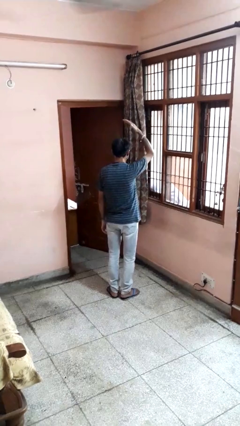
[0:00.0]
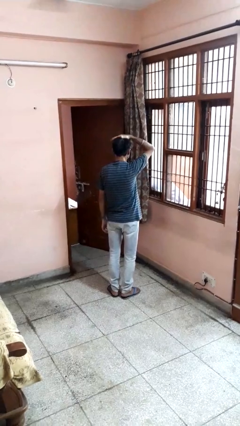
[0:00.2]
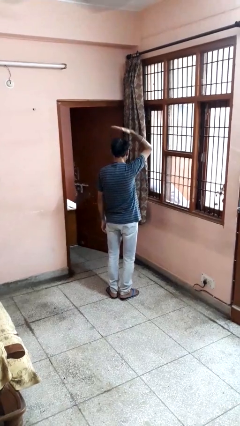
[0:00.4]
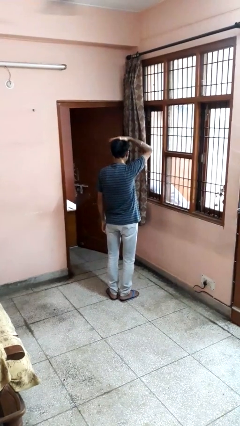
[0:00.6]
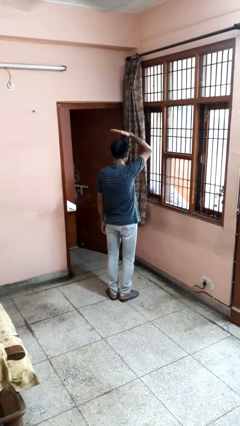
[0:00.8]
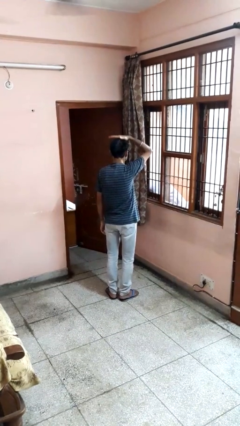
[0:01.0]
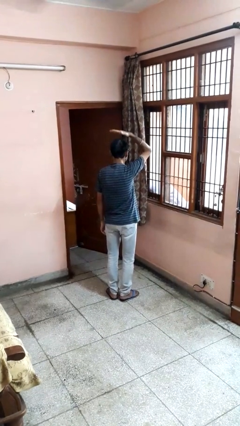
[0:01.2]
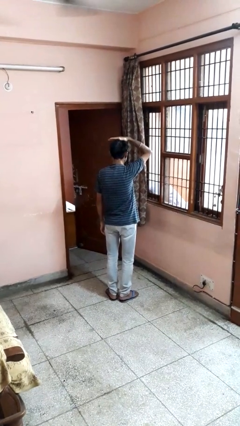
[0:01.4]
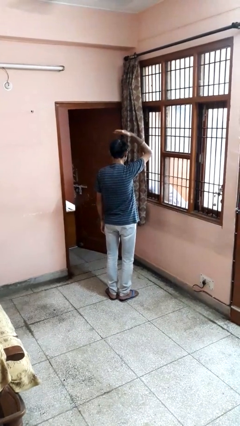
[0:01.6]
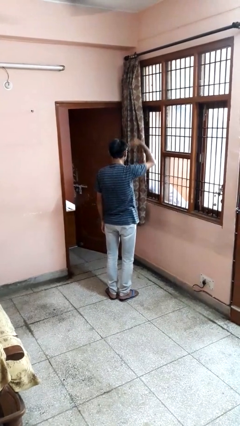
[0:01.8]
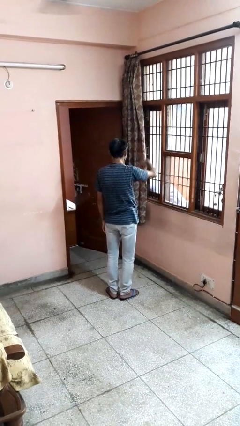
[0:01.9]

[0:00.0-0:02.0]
person pats head

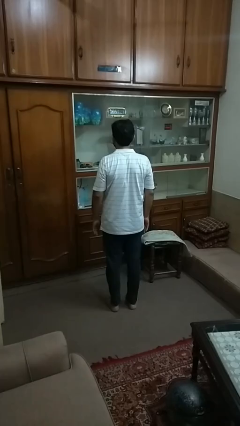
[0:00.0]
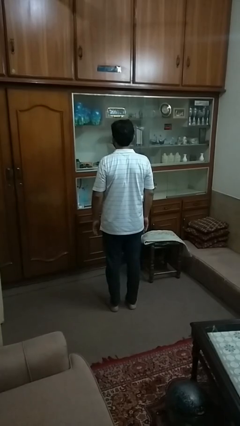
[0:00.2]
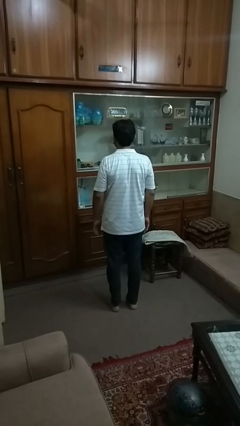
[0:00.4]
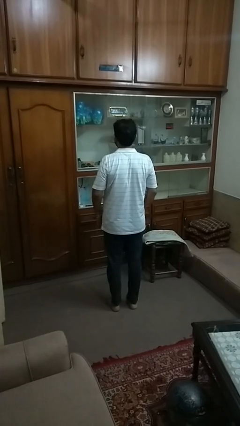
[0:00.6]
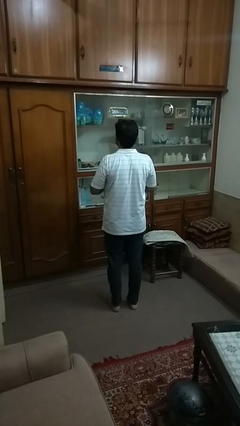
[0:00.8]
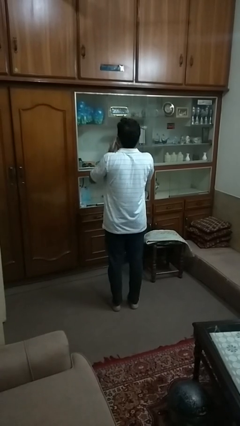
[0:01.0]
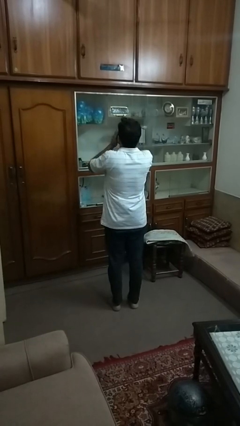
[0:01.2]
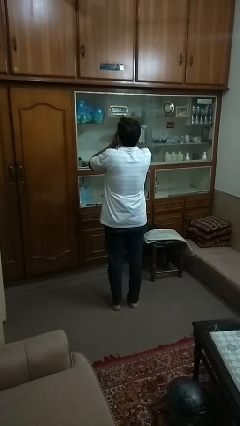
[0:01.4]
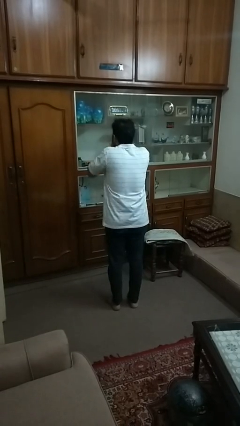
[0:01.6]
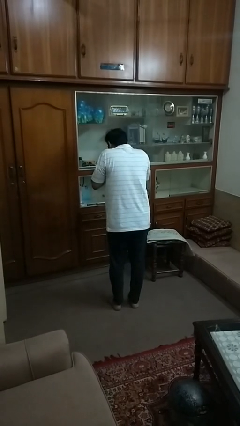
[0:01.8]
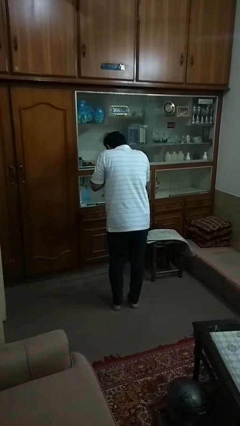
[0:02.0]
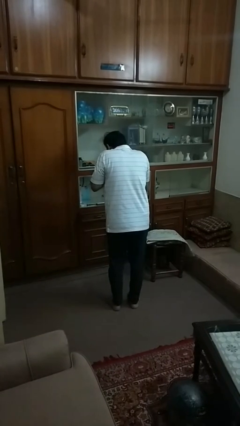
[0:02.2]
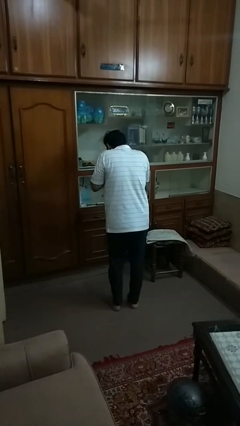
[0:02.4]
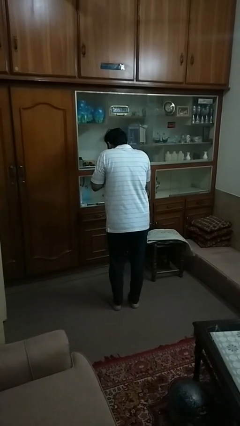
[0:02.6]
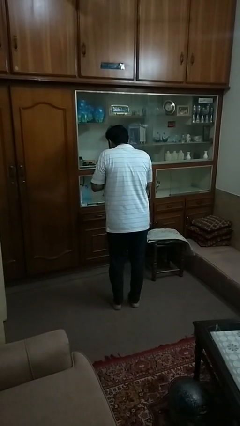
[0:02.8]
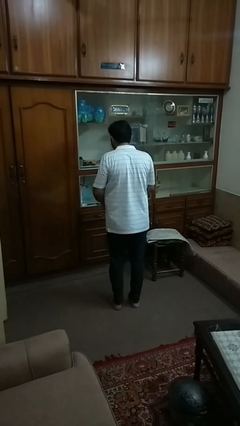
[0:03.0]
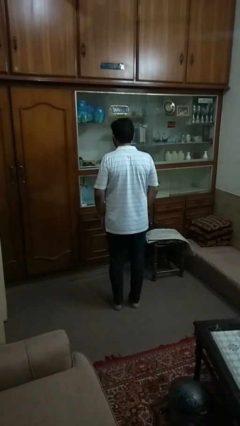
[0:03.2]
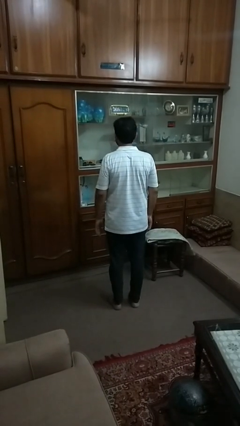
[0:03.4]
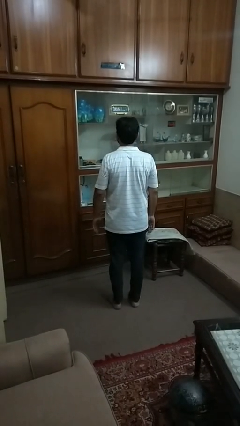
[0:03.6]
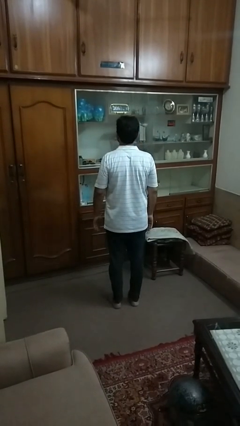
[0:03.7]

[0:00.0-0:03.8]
person sneezes into hand

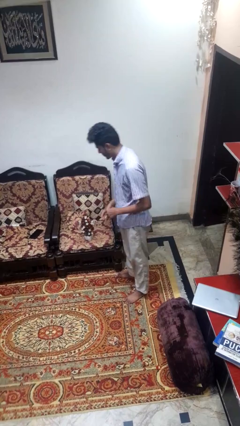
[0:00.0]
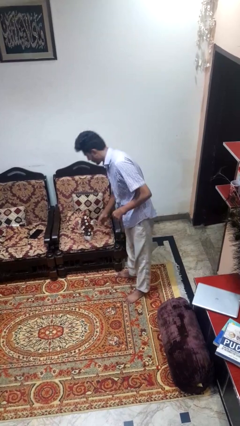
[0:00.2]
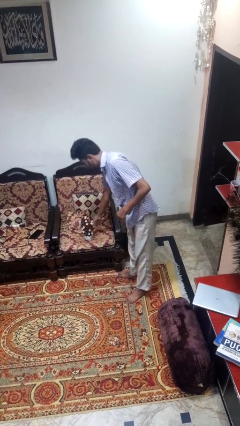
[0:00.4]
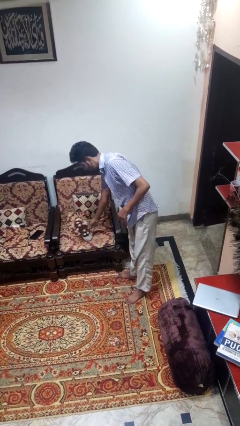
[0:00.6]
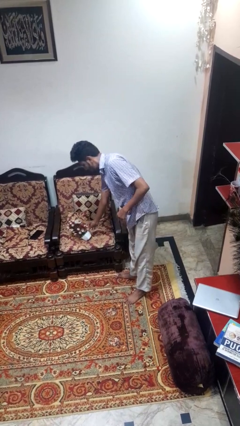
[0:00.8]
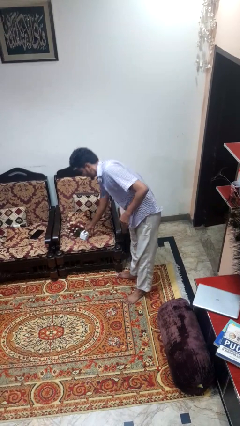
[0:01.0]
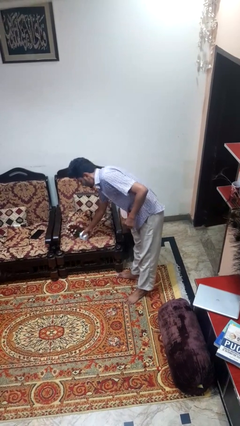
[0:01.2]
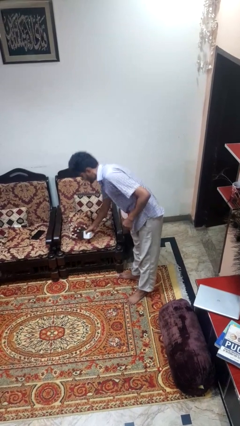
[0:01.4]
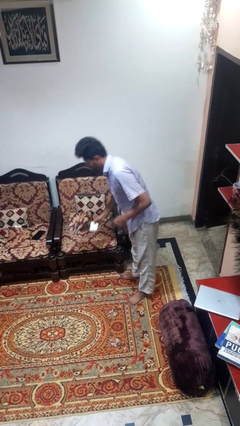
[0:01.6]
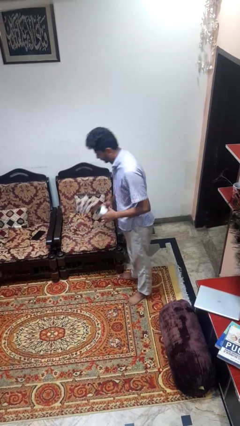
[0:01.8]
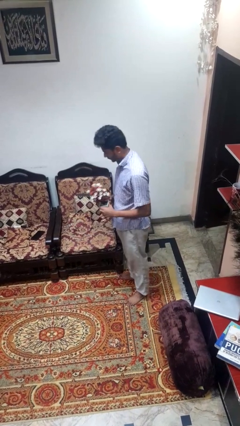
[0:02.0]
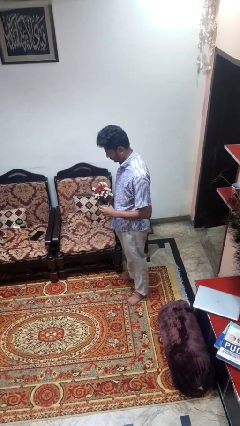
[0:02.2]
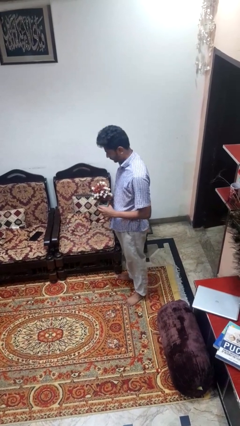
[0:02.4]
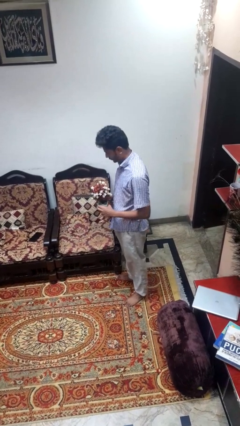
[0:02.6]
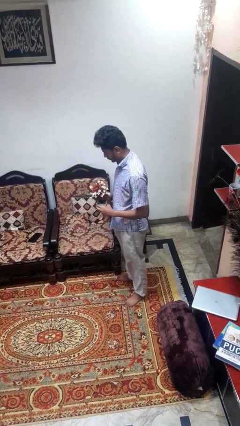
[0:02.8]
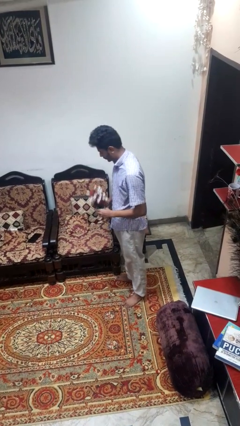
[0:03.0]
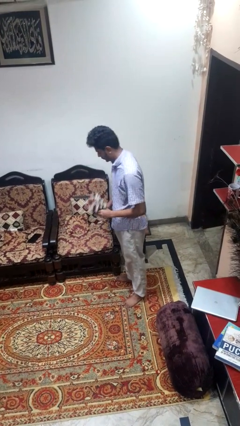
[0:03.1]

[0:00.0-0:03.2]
person picks up object from couch

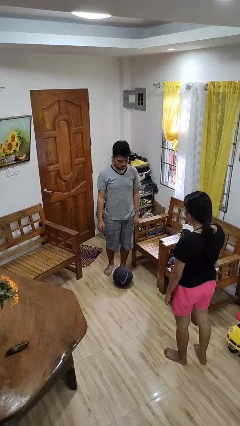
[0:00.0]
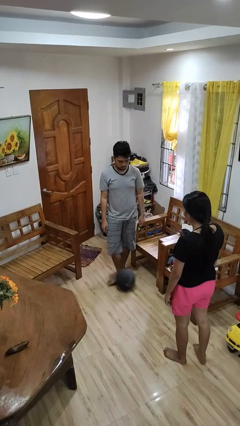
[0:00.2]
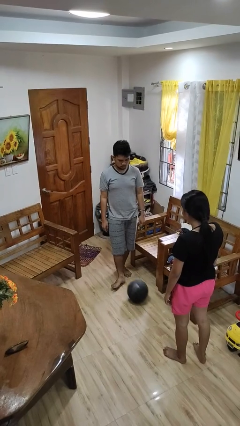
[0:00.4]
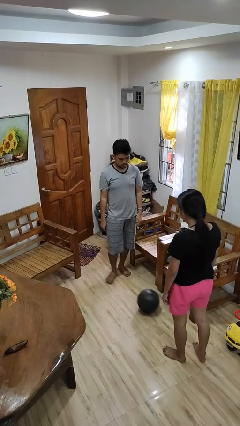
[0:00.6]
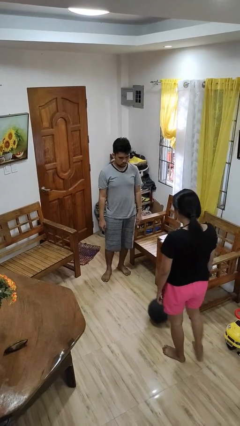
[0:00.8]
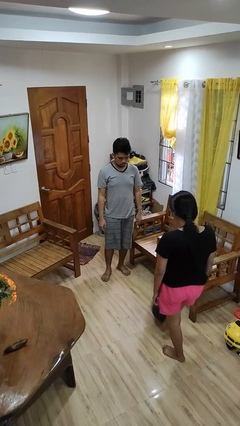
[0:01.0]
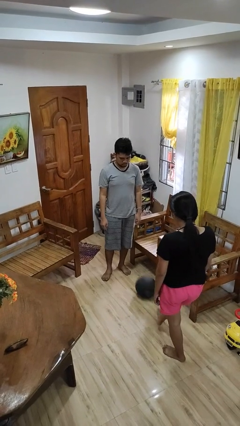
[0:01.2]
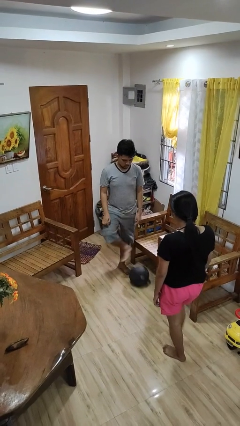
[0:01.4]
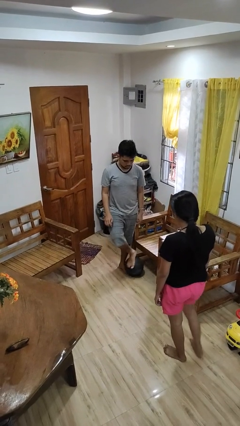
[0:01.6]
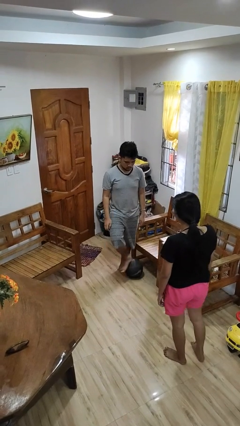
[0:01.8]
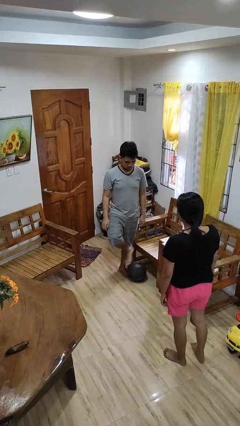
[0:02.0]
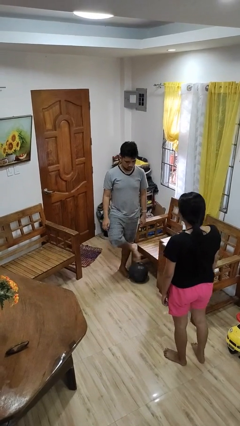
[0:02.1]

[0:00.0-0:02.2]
person kicks object to person

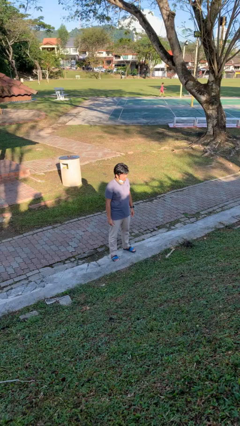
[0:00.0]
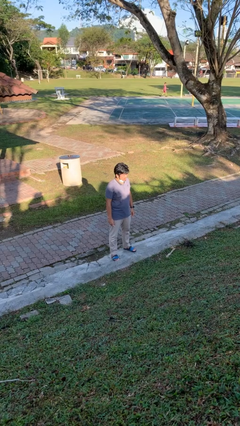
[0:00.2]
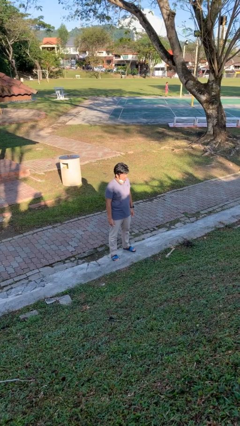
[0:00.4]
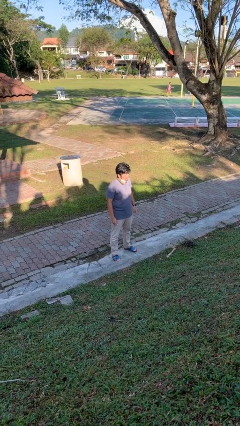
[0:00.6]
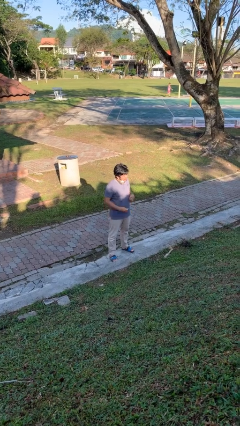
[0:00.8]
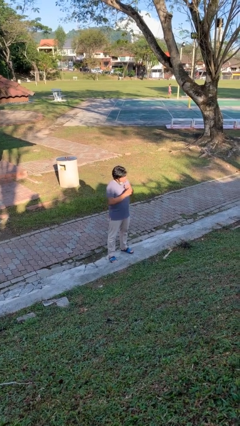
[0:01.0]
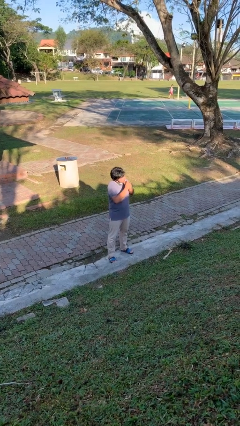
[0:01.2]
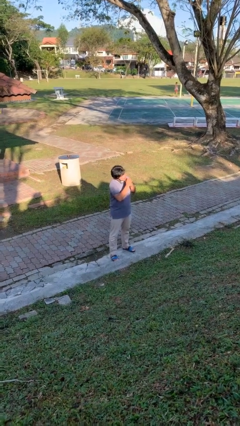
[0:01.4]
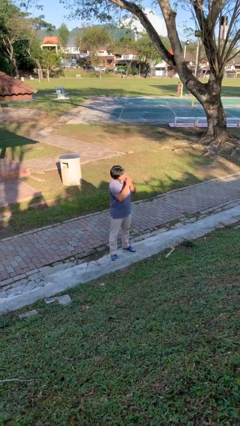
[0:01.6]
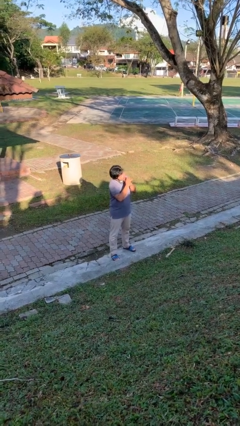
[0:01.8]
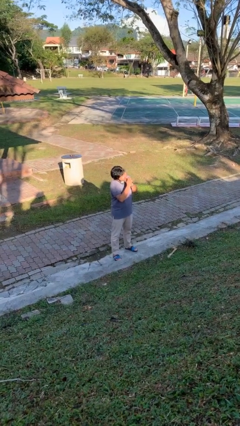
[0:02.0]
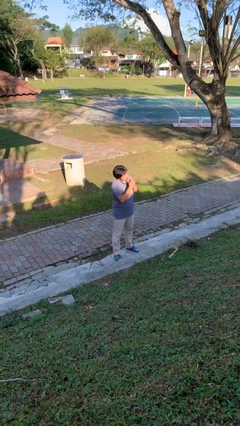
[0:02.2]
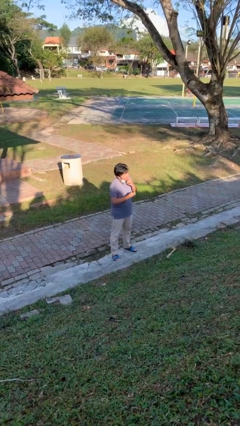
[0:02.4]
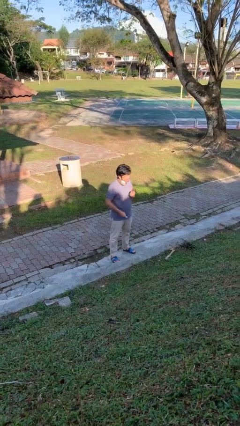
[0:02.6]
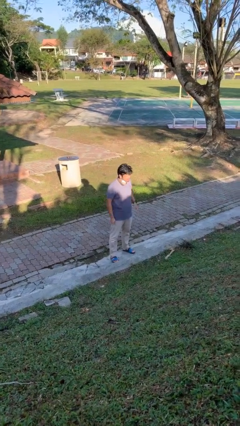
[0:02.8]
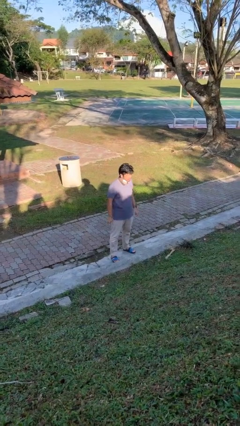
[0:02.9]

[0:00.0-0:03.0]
person flosses

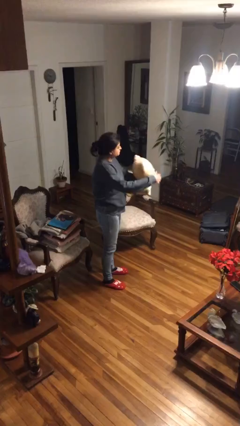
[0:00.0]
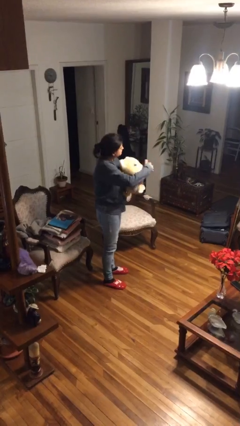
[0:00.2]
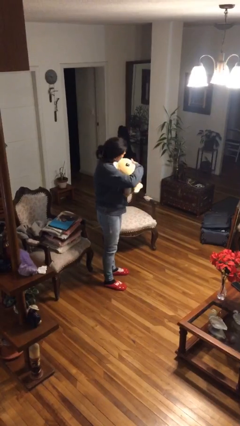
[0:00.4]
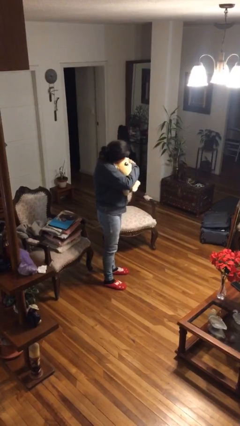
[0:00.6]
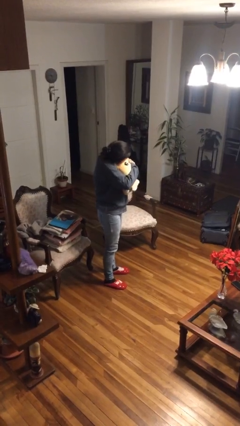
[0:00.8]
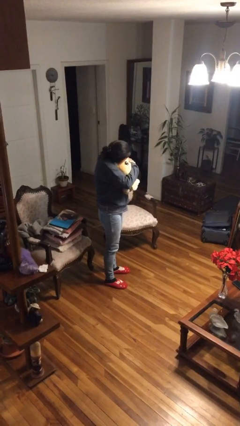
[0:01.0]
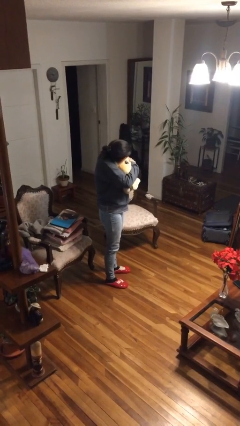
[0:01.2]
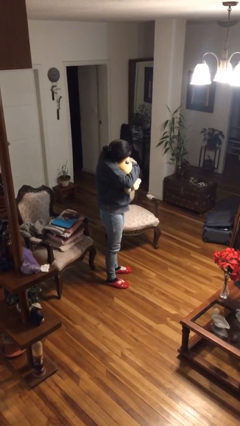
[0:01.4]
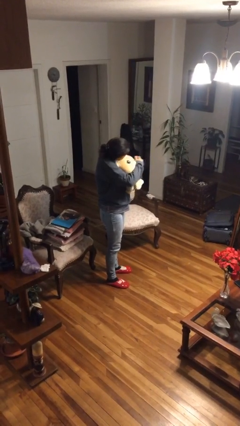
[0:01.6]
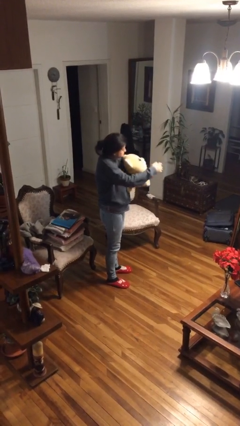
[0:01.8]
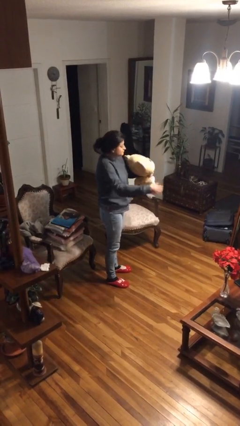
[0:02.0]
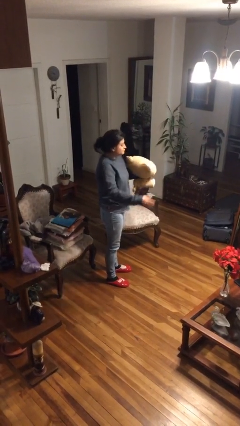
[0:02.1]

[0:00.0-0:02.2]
person hugs stuffed animal

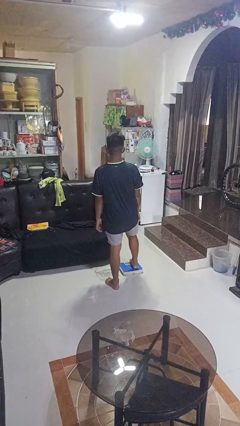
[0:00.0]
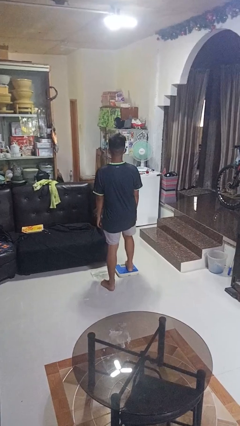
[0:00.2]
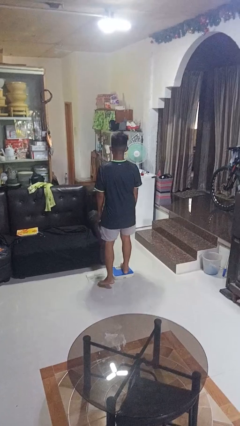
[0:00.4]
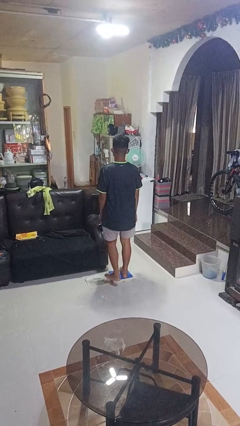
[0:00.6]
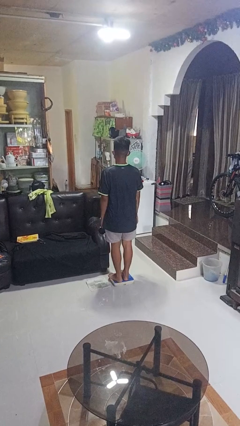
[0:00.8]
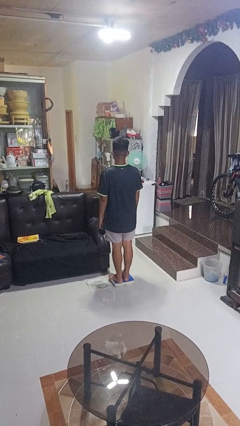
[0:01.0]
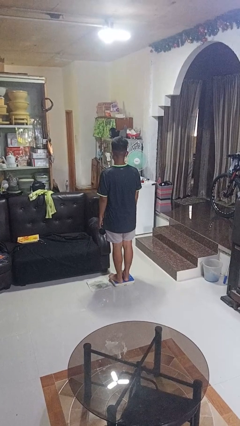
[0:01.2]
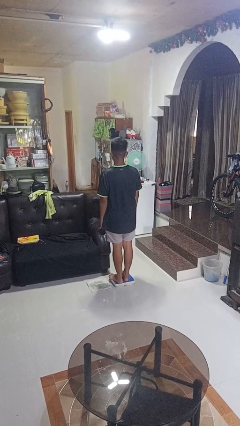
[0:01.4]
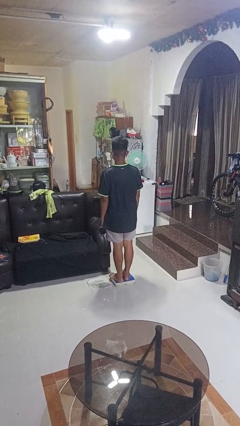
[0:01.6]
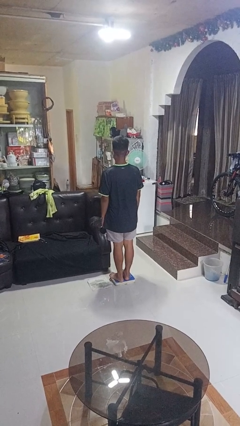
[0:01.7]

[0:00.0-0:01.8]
person uses bodyweight scale
